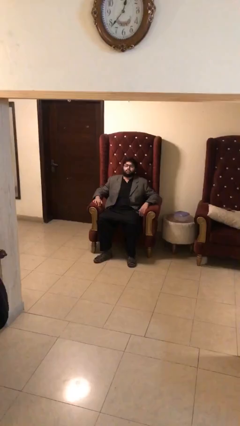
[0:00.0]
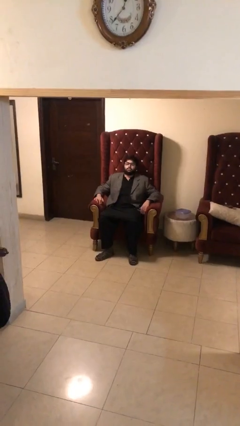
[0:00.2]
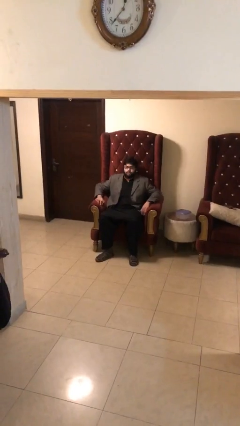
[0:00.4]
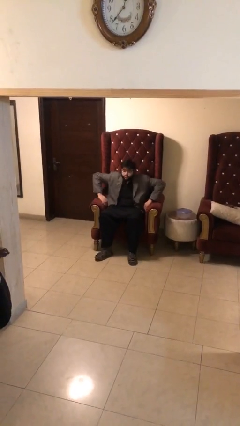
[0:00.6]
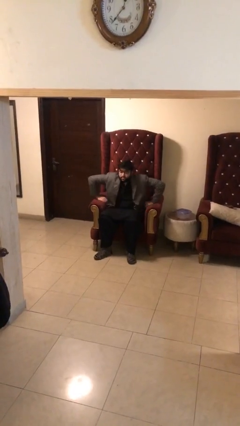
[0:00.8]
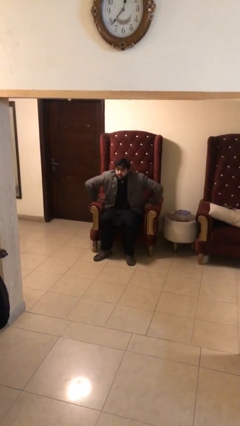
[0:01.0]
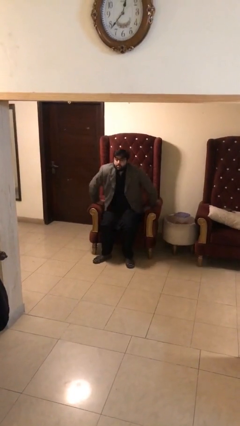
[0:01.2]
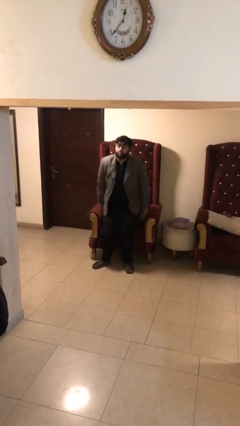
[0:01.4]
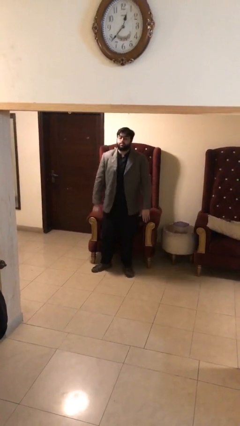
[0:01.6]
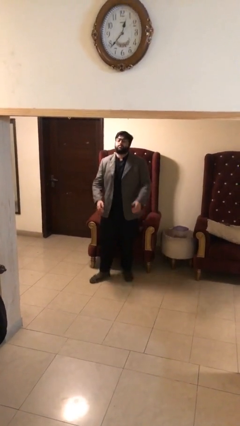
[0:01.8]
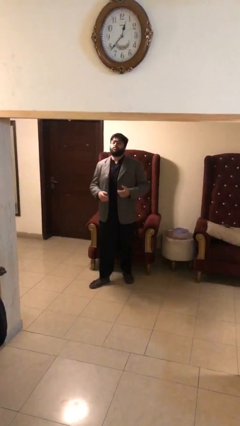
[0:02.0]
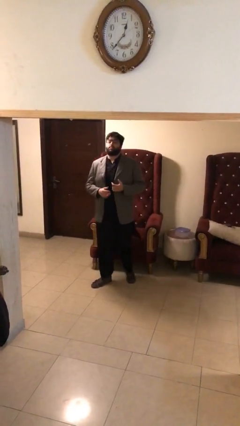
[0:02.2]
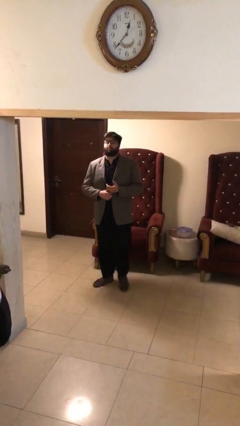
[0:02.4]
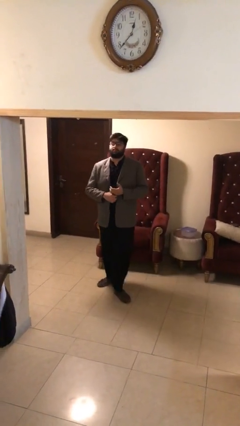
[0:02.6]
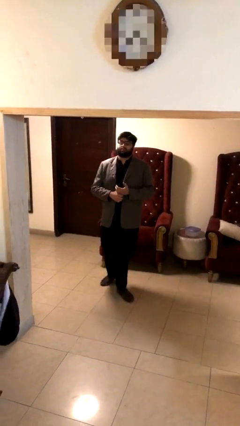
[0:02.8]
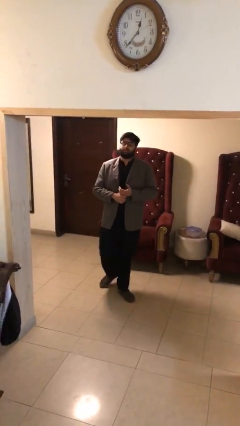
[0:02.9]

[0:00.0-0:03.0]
person stands up

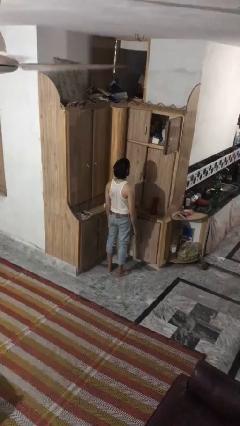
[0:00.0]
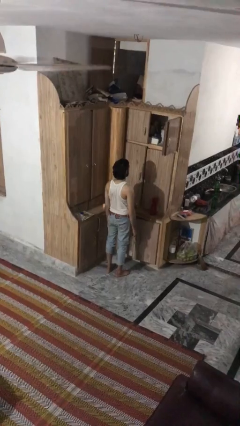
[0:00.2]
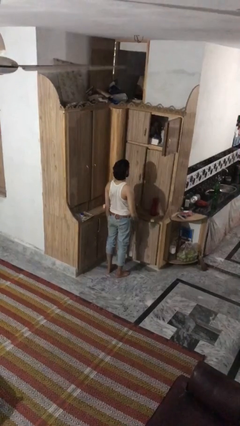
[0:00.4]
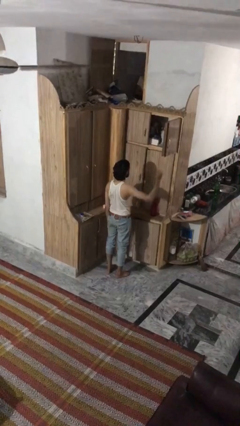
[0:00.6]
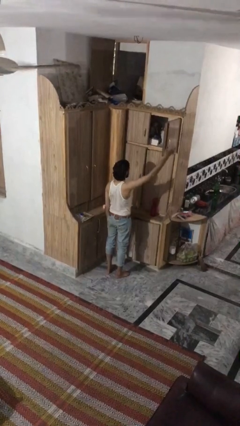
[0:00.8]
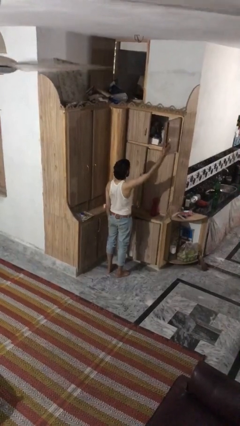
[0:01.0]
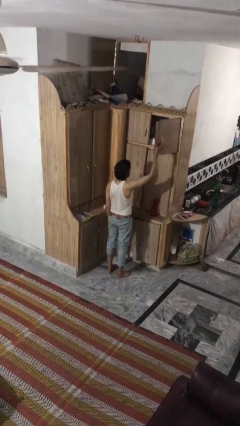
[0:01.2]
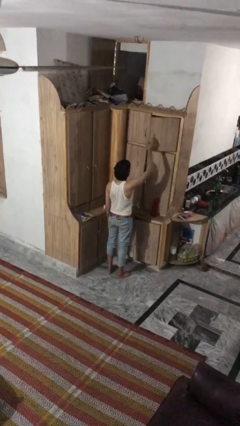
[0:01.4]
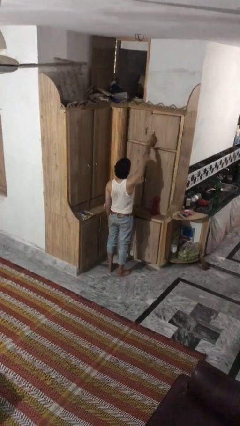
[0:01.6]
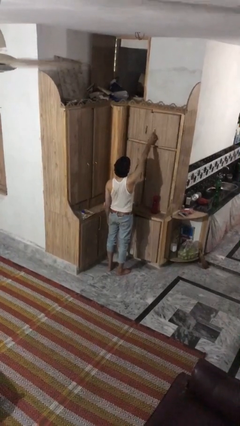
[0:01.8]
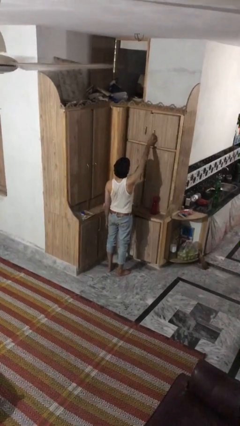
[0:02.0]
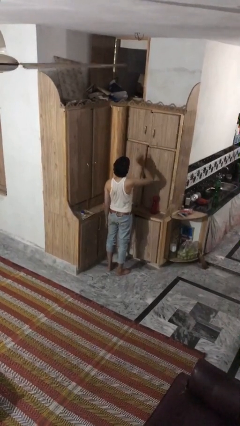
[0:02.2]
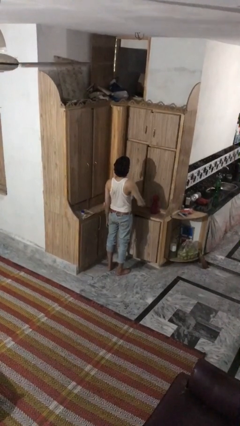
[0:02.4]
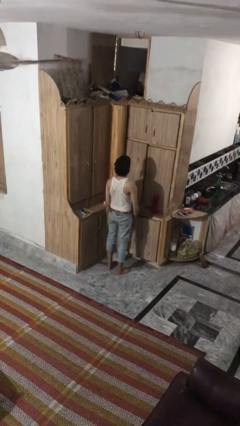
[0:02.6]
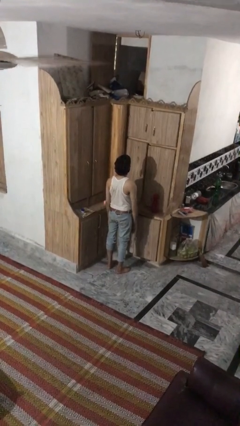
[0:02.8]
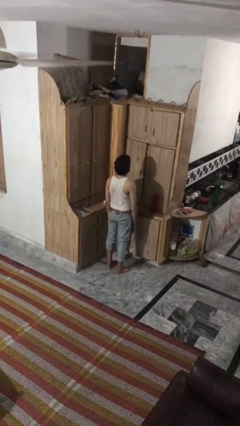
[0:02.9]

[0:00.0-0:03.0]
person closes cabinet

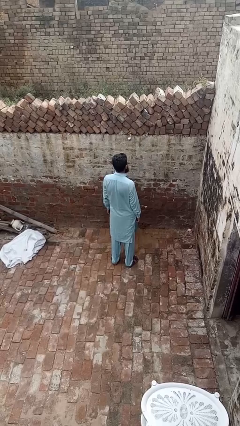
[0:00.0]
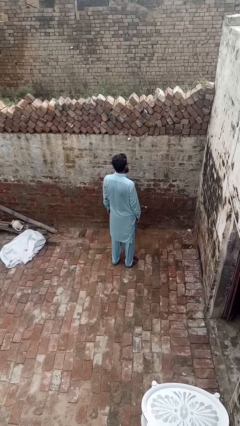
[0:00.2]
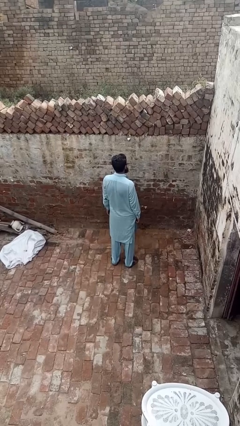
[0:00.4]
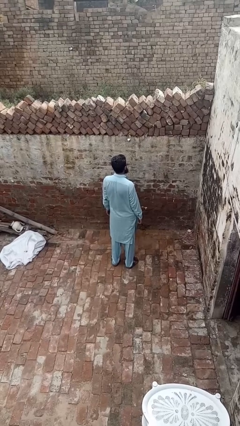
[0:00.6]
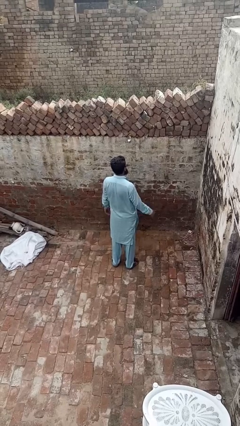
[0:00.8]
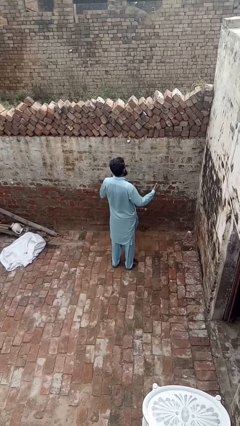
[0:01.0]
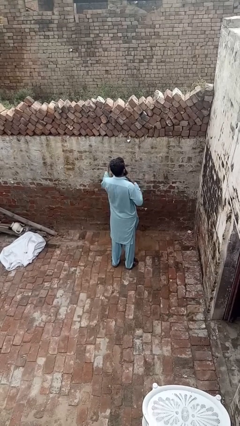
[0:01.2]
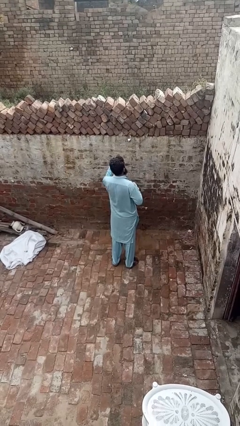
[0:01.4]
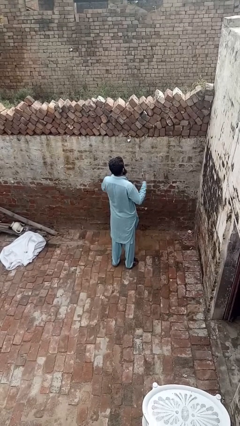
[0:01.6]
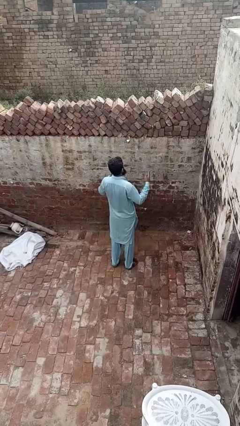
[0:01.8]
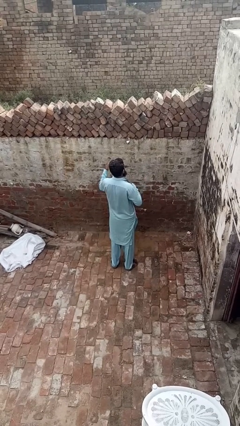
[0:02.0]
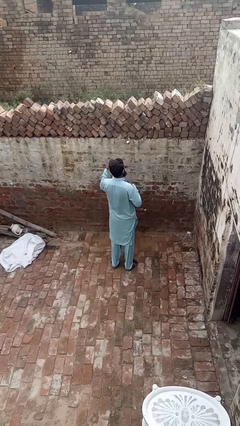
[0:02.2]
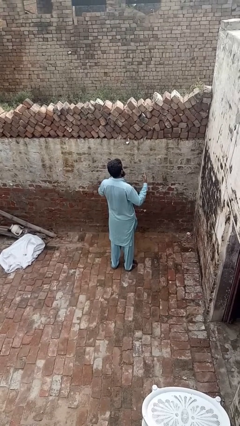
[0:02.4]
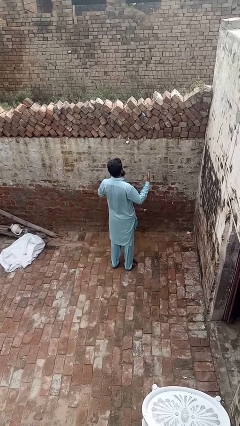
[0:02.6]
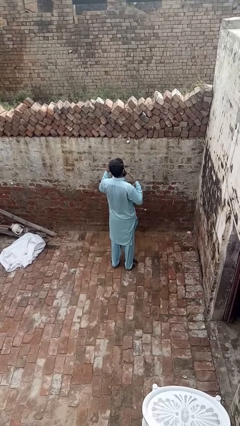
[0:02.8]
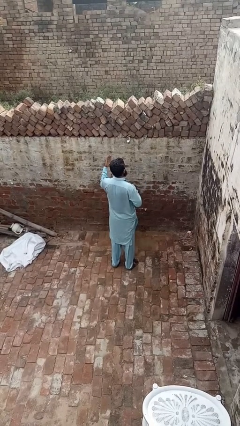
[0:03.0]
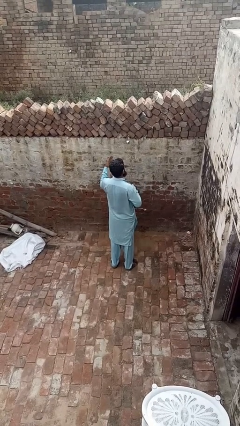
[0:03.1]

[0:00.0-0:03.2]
person drums on chest

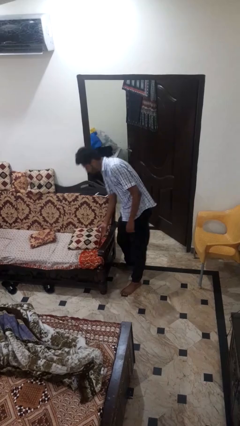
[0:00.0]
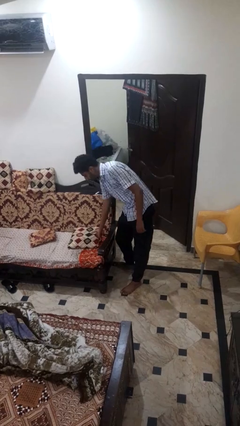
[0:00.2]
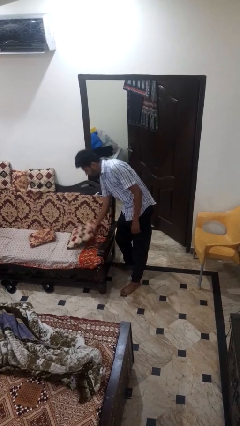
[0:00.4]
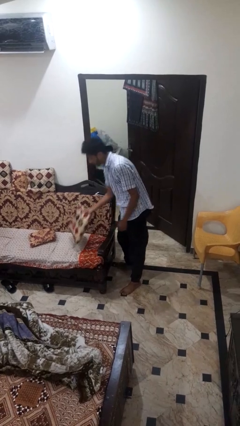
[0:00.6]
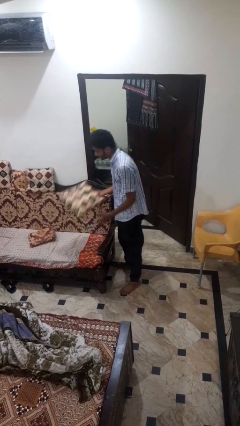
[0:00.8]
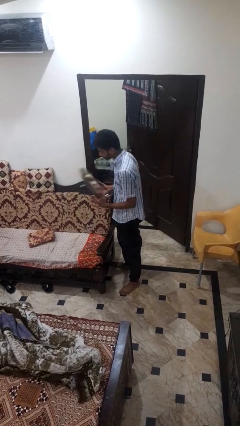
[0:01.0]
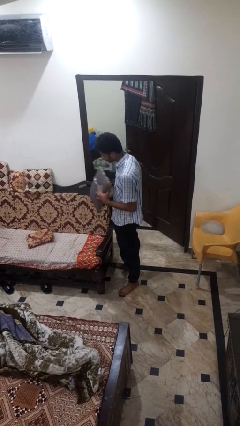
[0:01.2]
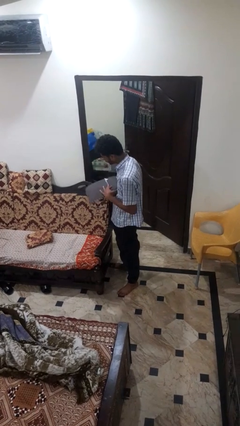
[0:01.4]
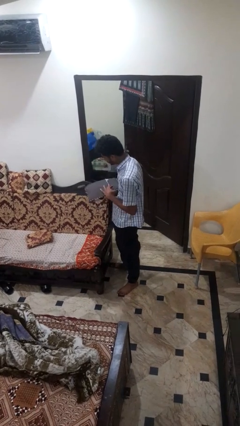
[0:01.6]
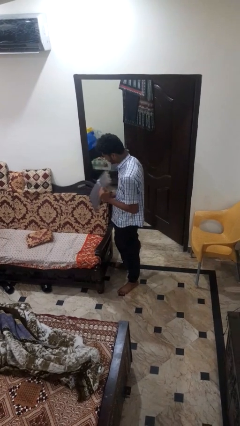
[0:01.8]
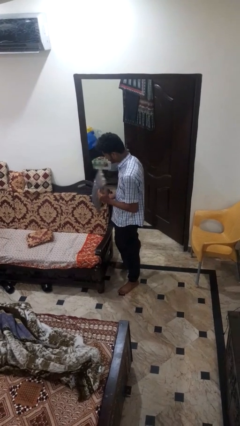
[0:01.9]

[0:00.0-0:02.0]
person picks up object from couch

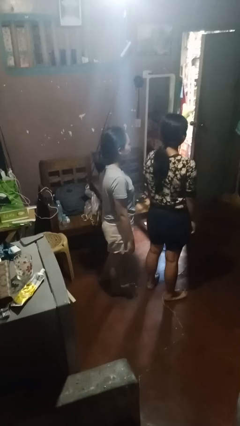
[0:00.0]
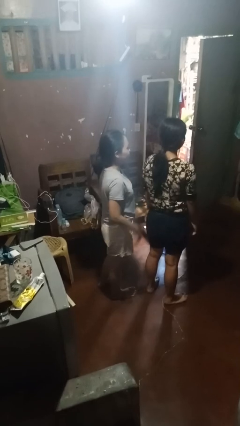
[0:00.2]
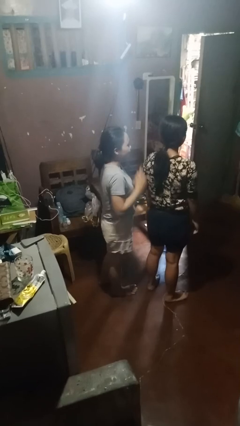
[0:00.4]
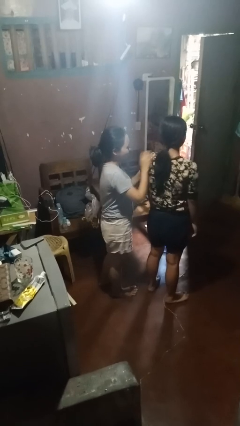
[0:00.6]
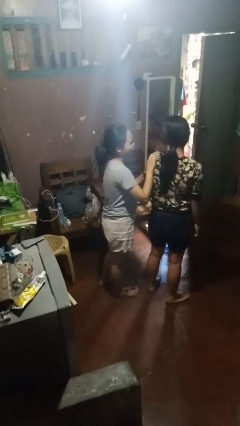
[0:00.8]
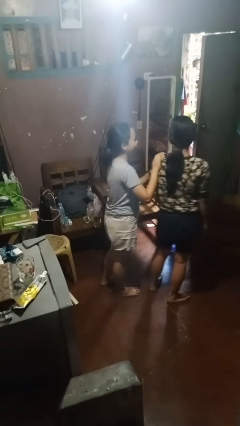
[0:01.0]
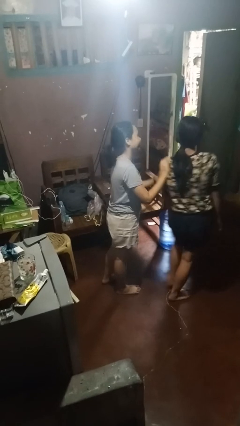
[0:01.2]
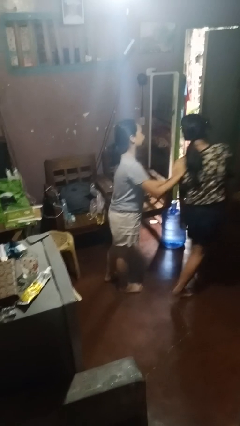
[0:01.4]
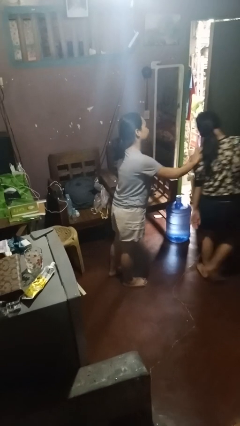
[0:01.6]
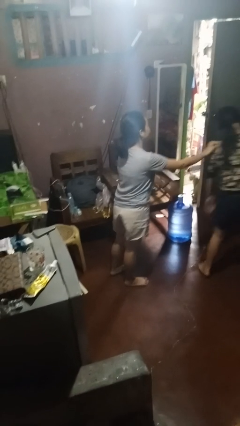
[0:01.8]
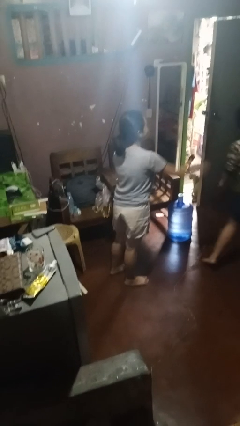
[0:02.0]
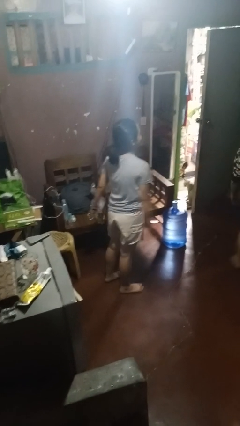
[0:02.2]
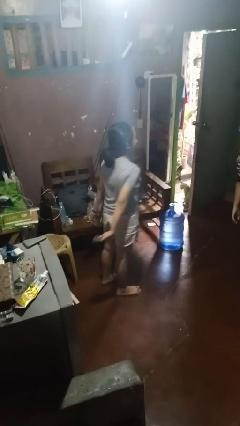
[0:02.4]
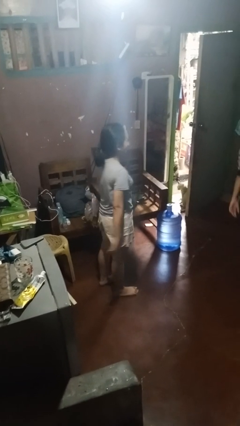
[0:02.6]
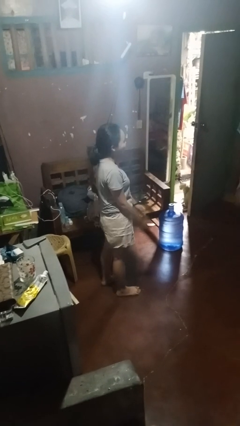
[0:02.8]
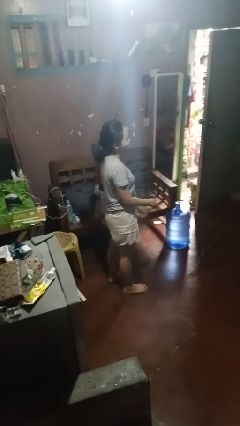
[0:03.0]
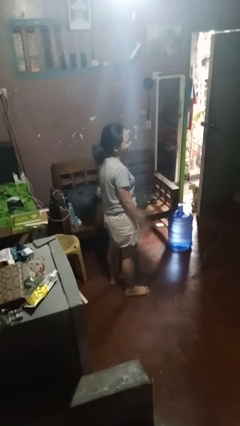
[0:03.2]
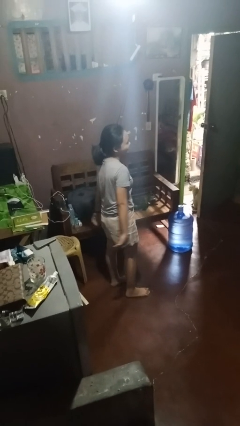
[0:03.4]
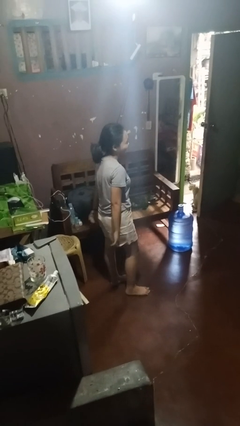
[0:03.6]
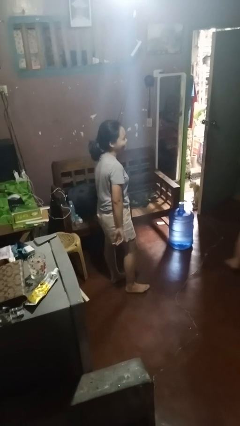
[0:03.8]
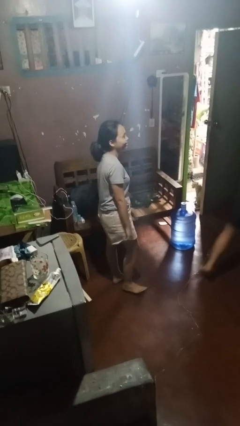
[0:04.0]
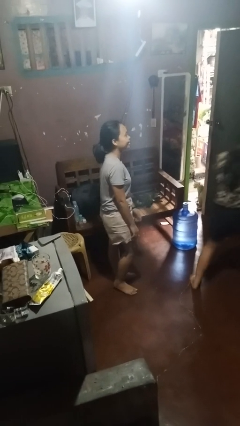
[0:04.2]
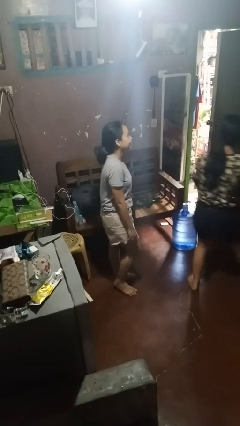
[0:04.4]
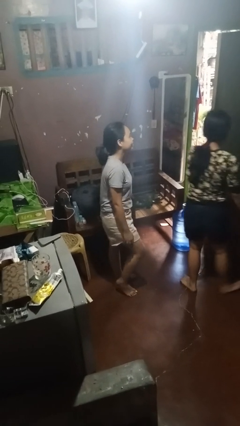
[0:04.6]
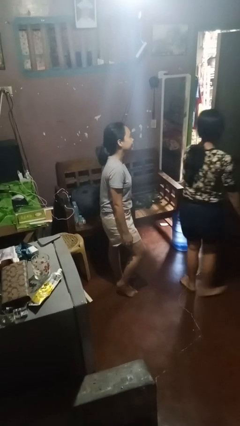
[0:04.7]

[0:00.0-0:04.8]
person shoves person

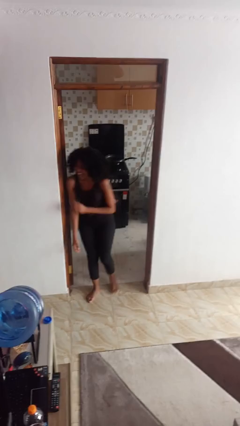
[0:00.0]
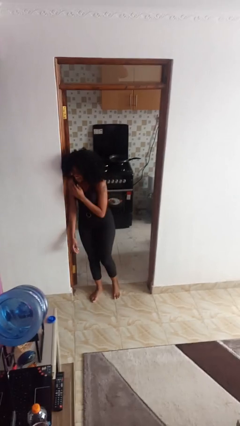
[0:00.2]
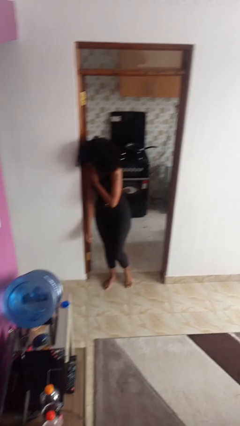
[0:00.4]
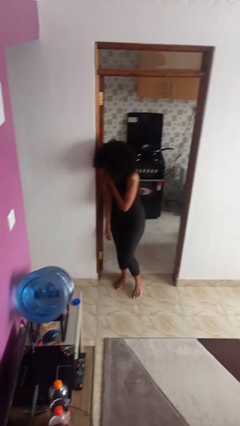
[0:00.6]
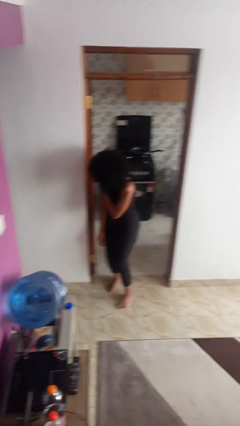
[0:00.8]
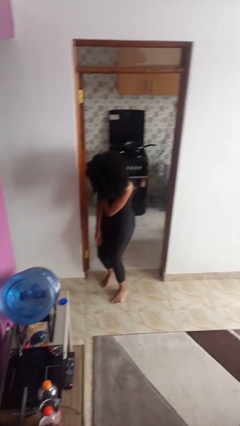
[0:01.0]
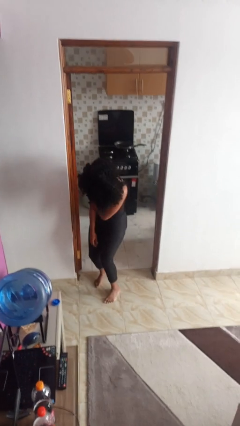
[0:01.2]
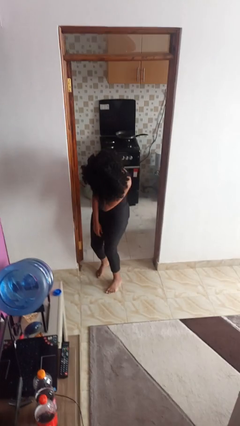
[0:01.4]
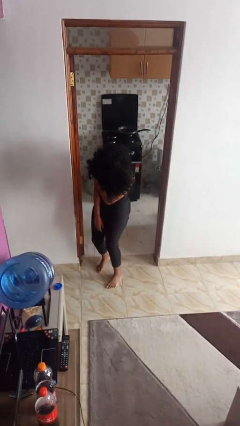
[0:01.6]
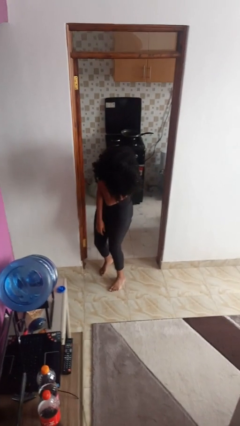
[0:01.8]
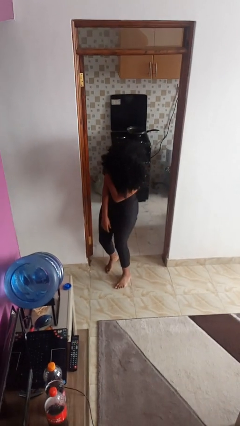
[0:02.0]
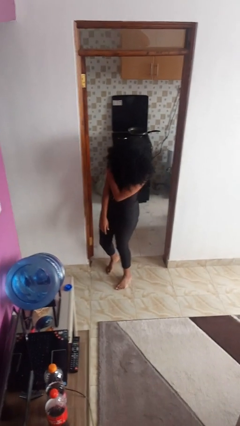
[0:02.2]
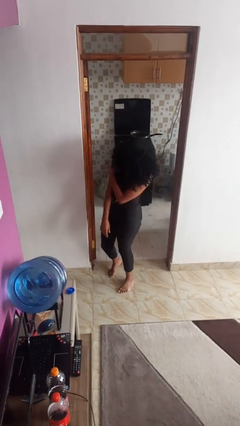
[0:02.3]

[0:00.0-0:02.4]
person bumps into wall
